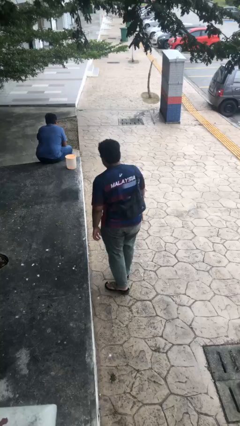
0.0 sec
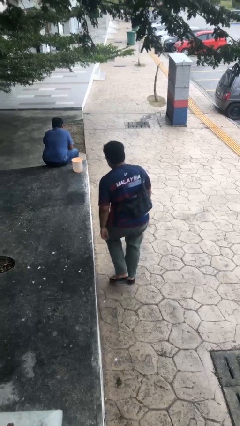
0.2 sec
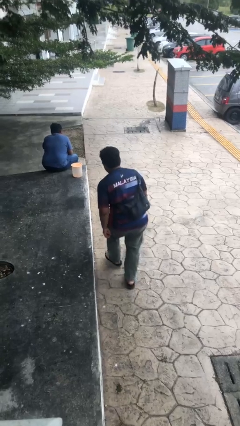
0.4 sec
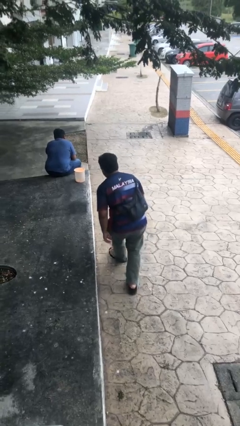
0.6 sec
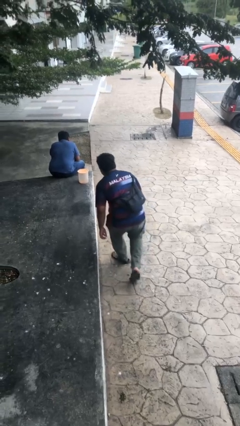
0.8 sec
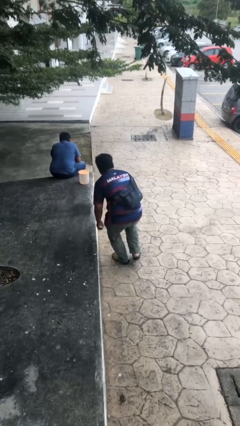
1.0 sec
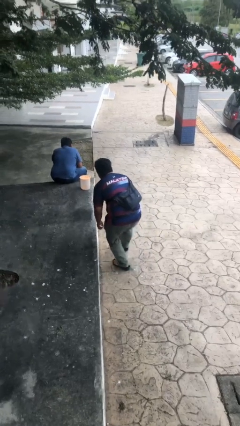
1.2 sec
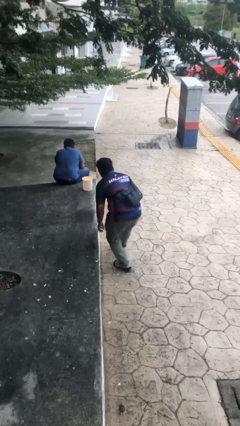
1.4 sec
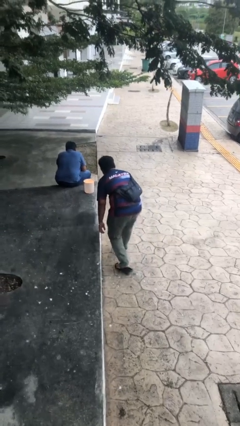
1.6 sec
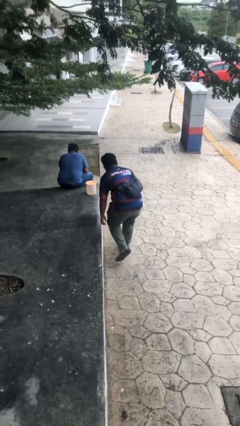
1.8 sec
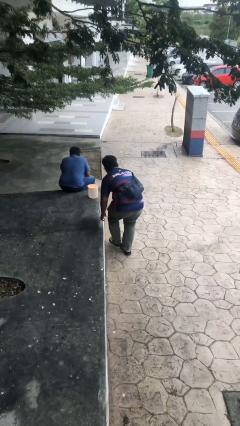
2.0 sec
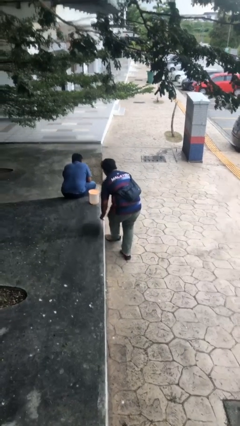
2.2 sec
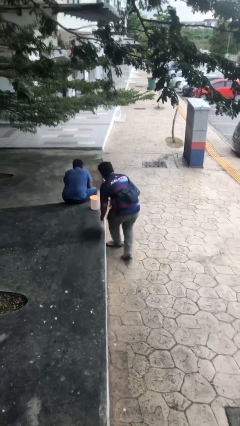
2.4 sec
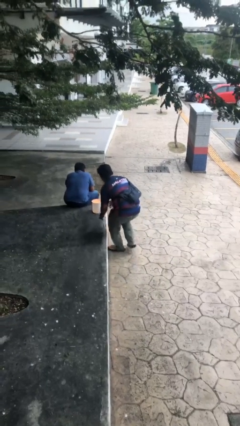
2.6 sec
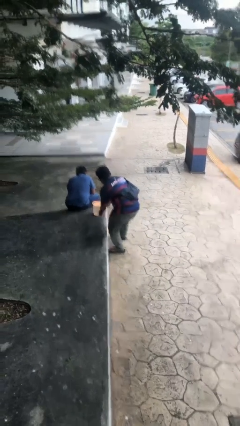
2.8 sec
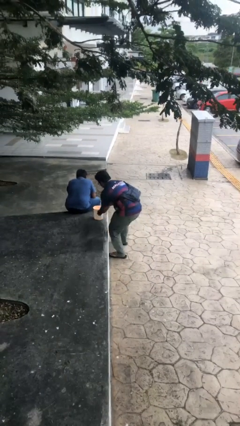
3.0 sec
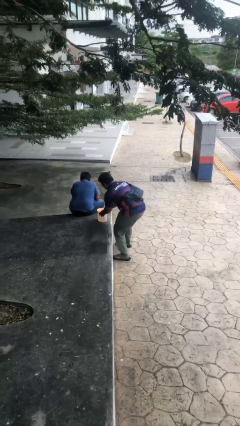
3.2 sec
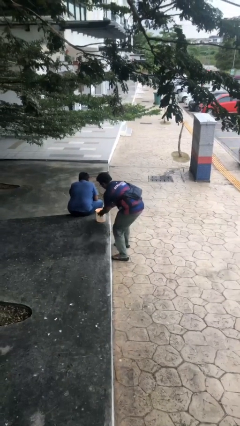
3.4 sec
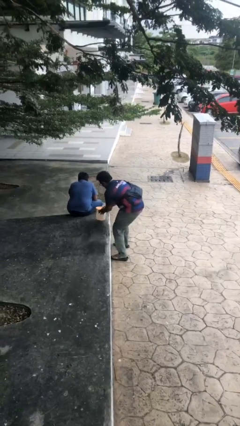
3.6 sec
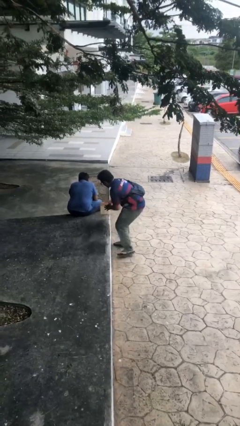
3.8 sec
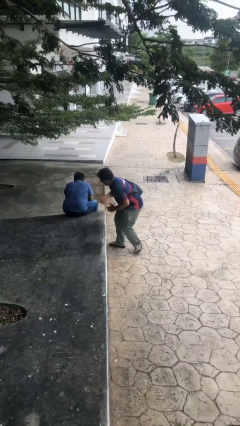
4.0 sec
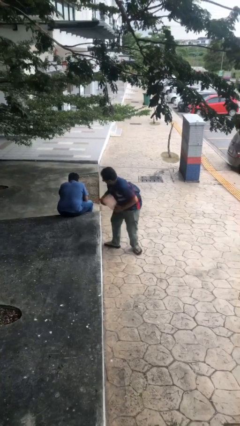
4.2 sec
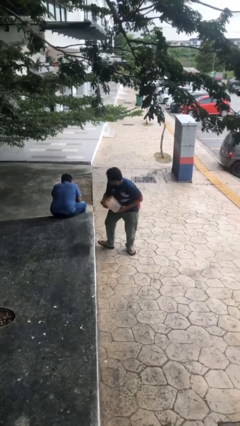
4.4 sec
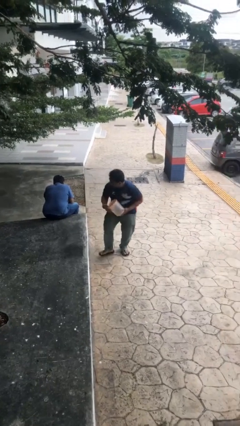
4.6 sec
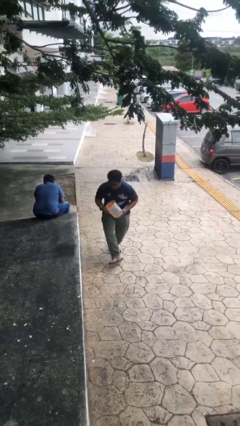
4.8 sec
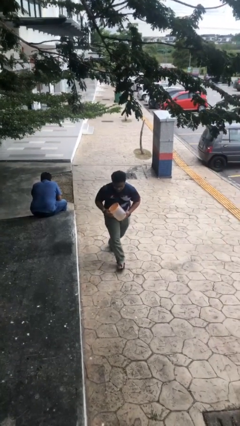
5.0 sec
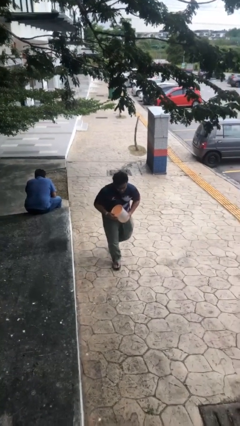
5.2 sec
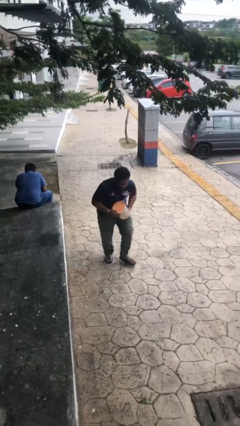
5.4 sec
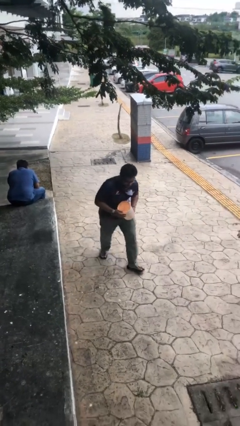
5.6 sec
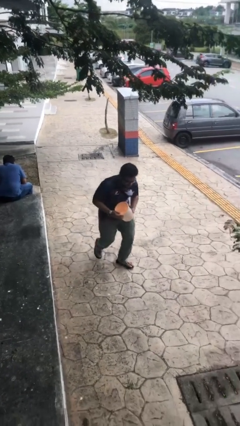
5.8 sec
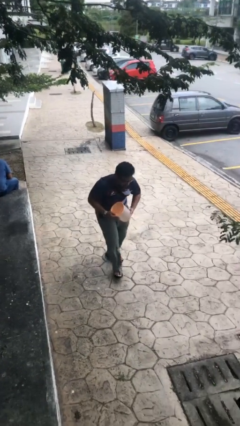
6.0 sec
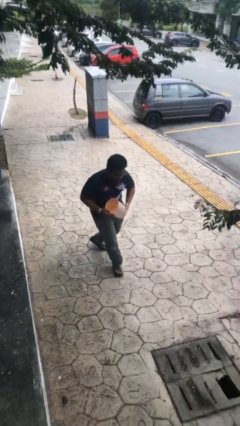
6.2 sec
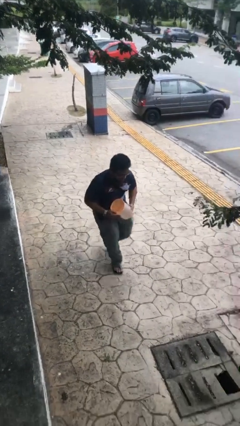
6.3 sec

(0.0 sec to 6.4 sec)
person steals object from person

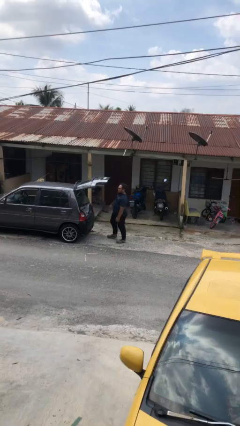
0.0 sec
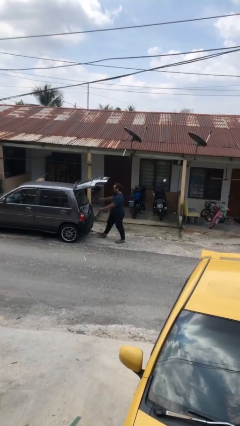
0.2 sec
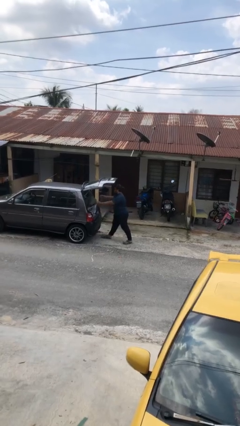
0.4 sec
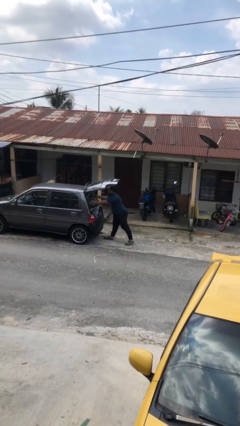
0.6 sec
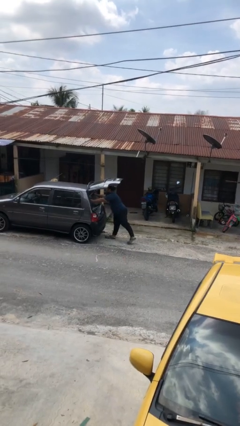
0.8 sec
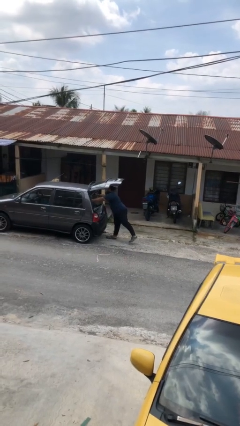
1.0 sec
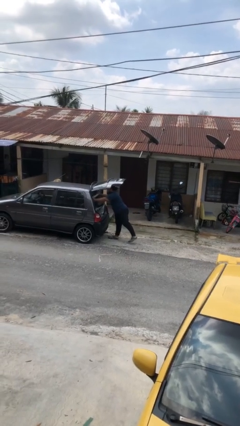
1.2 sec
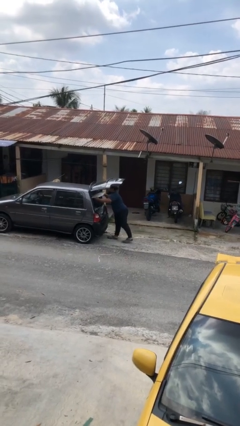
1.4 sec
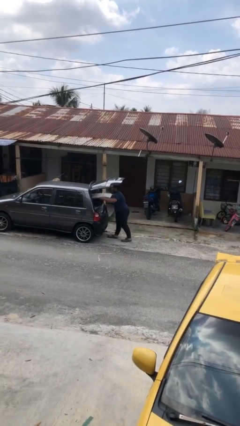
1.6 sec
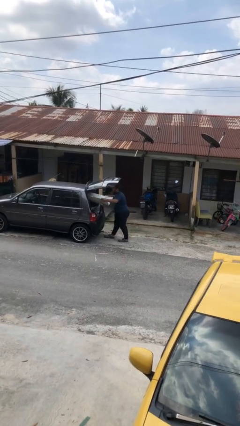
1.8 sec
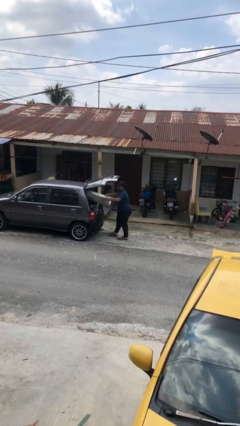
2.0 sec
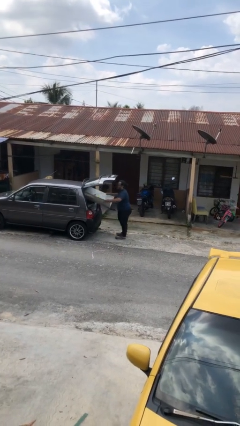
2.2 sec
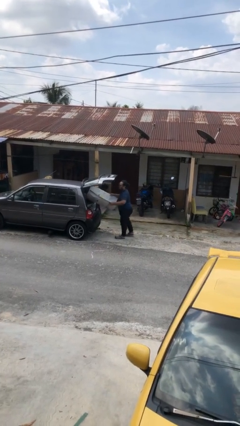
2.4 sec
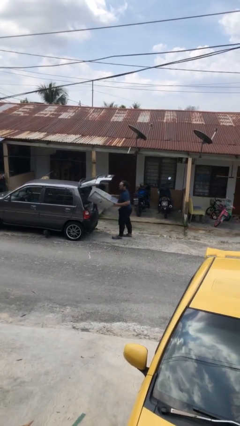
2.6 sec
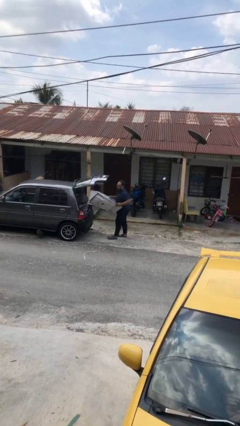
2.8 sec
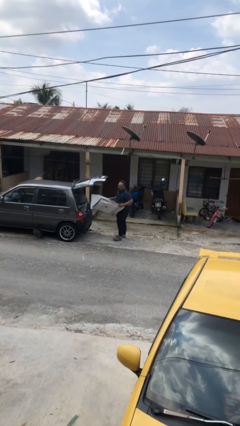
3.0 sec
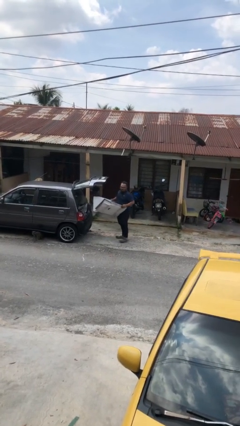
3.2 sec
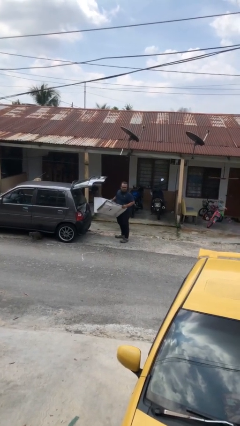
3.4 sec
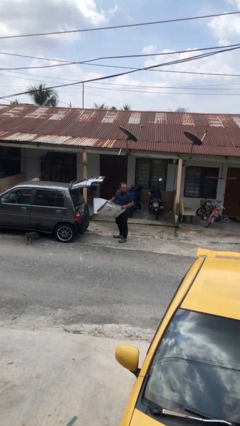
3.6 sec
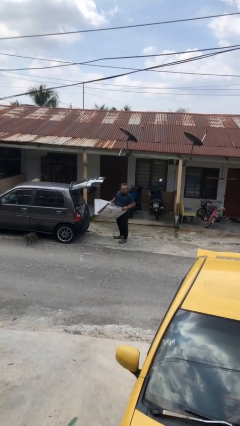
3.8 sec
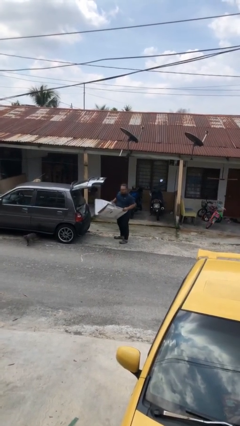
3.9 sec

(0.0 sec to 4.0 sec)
person unloads car

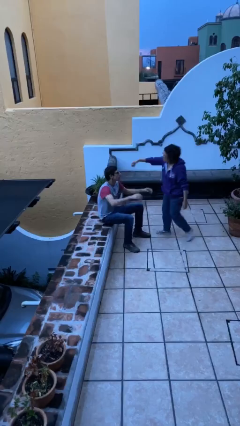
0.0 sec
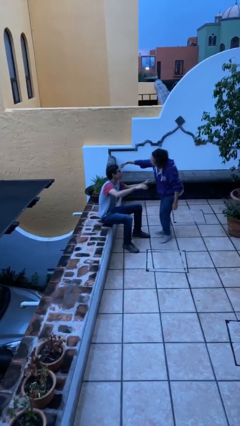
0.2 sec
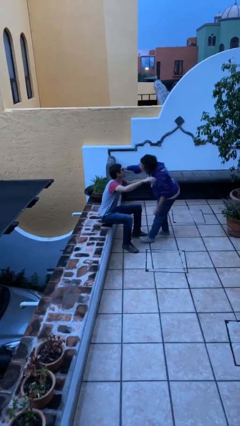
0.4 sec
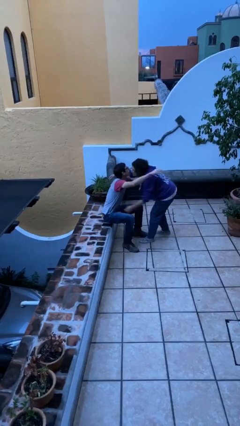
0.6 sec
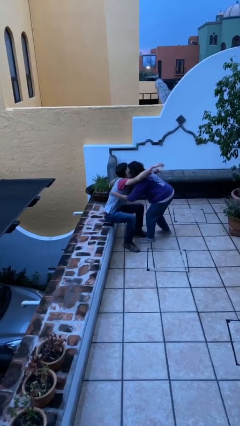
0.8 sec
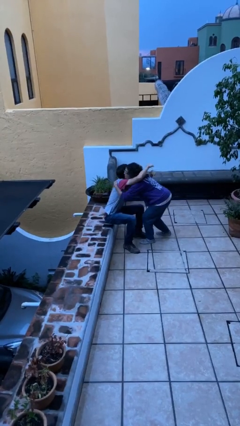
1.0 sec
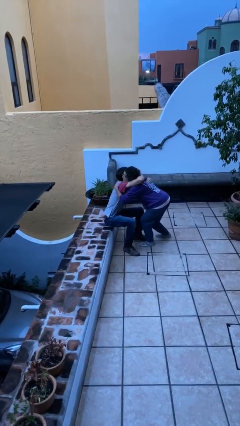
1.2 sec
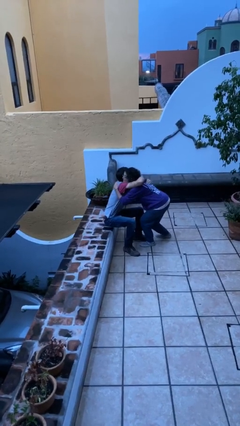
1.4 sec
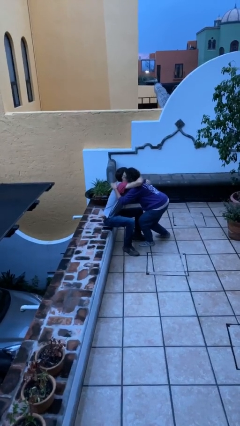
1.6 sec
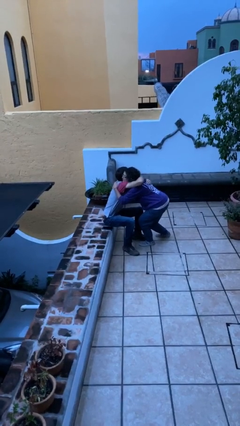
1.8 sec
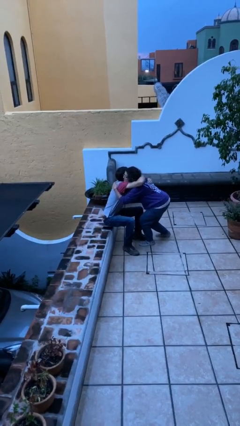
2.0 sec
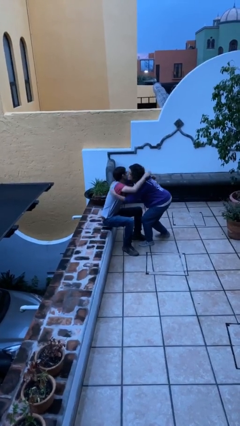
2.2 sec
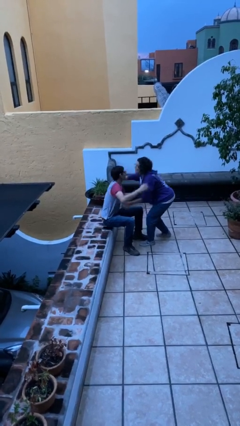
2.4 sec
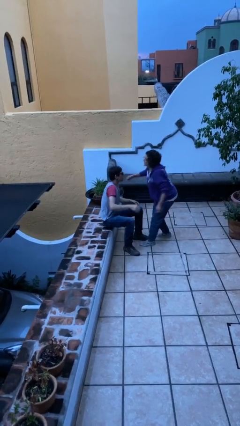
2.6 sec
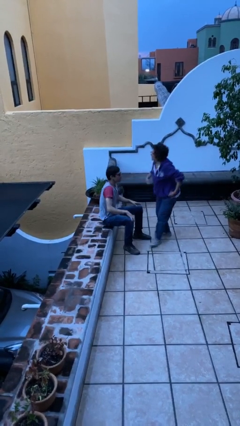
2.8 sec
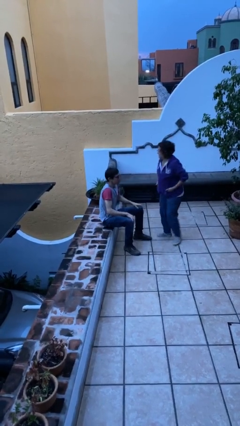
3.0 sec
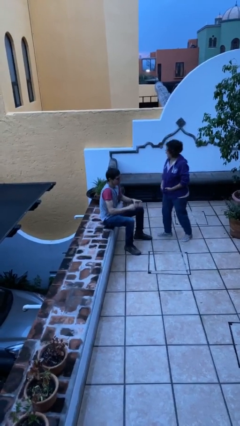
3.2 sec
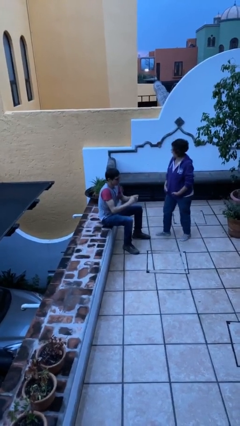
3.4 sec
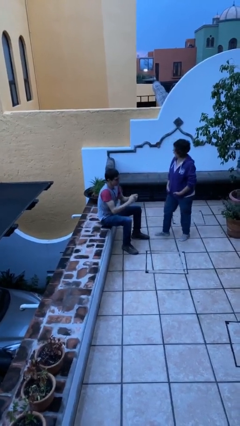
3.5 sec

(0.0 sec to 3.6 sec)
person embraces person

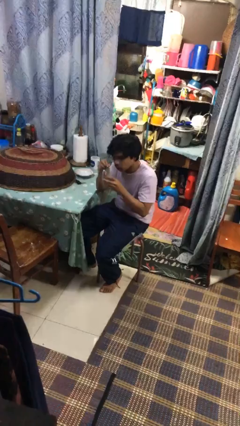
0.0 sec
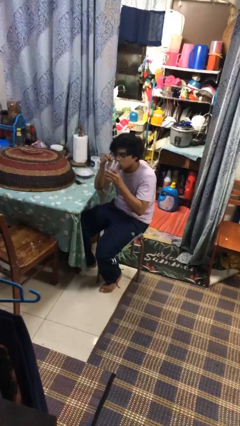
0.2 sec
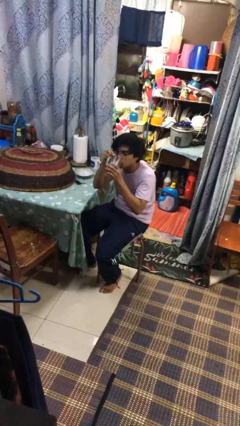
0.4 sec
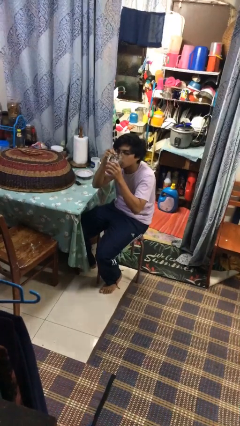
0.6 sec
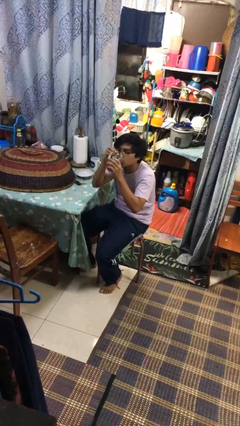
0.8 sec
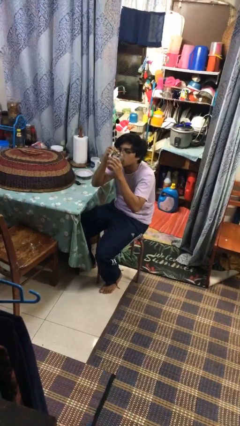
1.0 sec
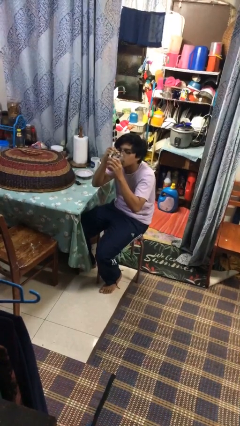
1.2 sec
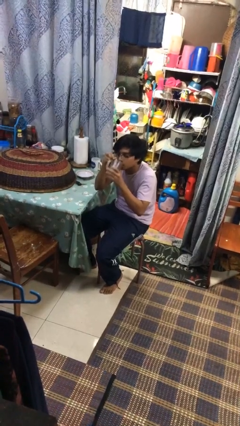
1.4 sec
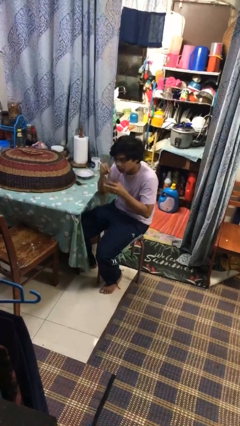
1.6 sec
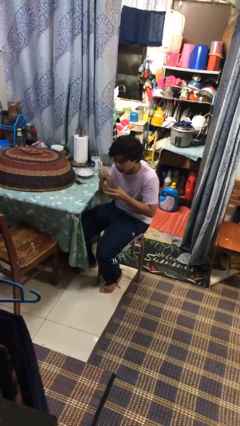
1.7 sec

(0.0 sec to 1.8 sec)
person drinks from mug

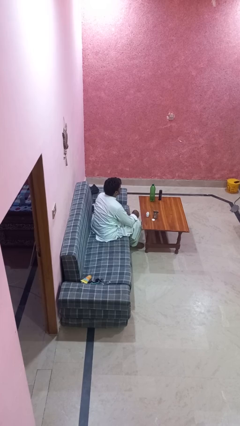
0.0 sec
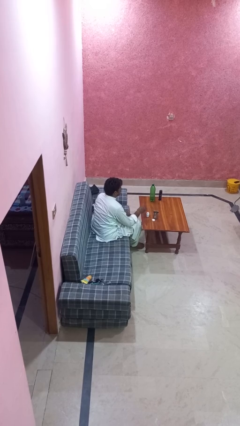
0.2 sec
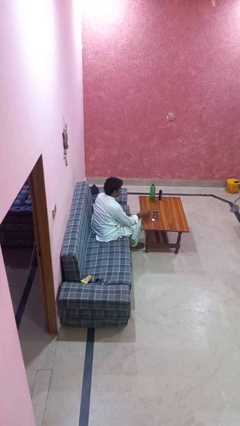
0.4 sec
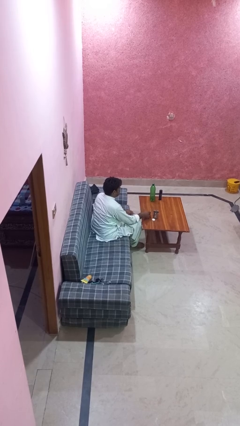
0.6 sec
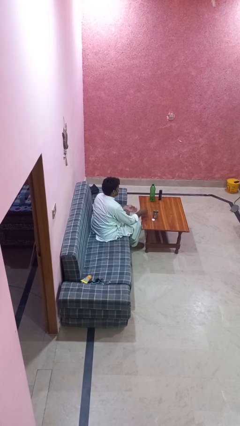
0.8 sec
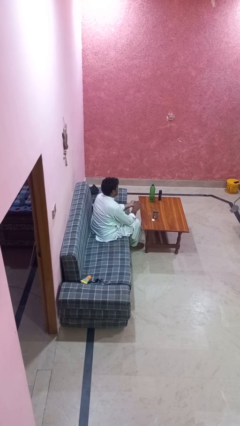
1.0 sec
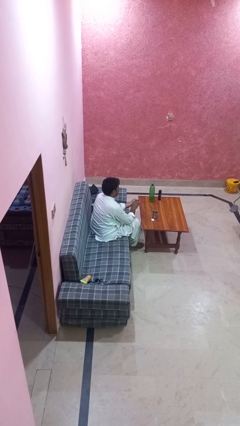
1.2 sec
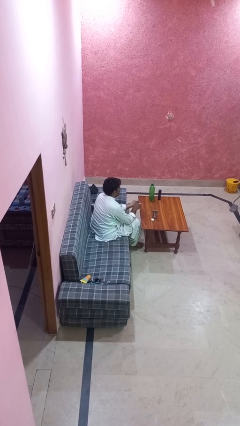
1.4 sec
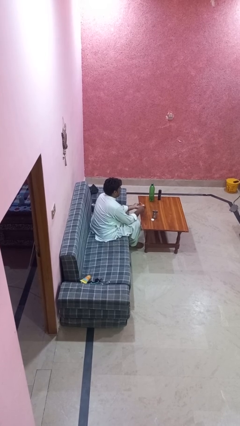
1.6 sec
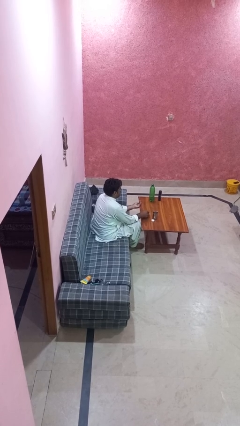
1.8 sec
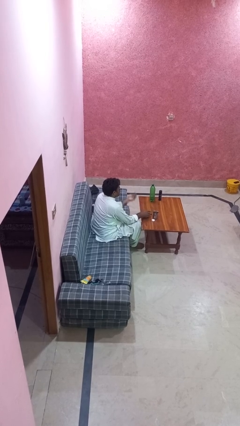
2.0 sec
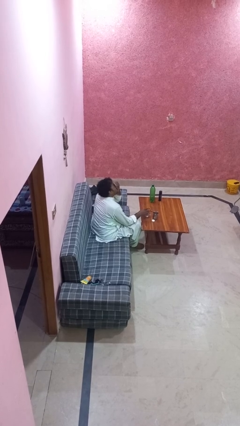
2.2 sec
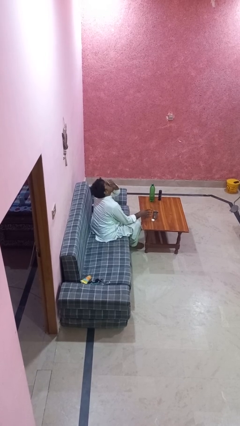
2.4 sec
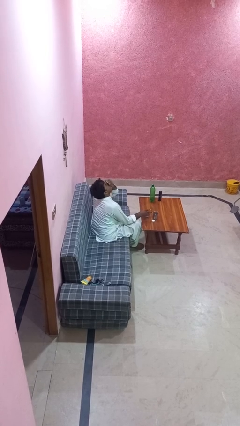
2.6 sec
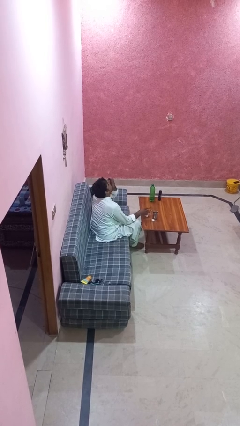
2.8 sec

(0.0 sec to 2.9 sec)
person takes medicine pills
